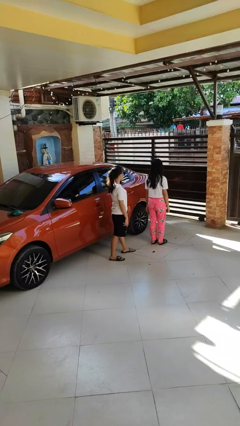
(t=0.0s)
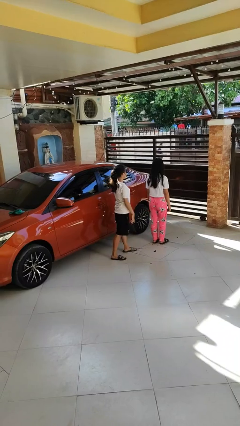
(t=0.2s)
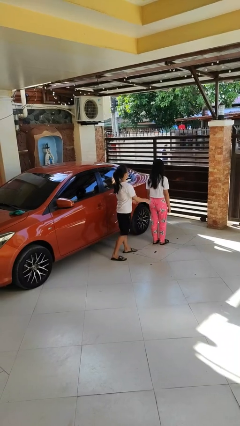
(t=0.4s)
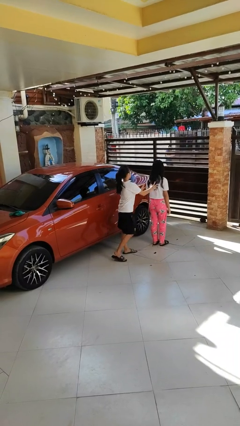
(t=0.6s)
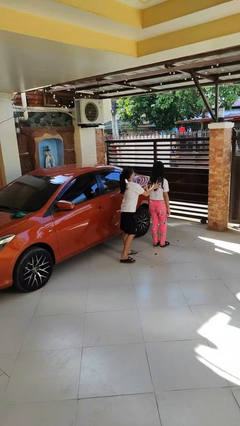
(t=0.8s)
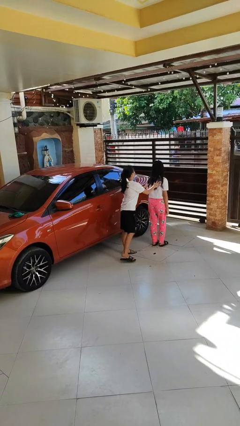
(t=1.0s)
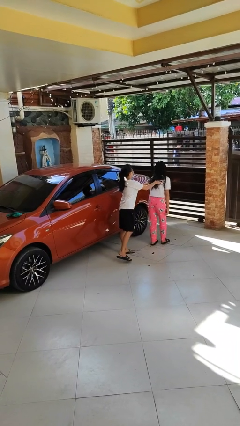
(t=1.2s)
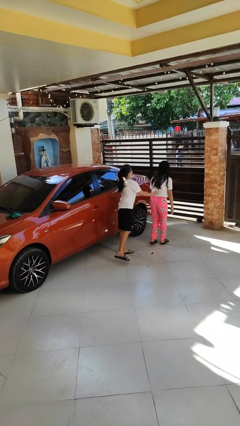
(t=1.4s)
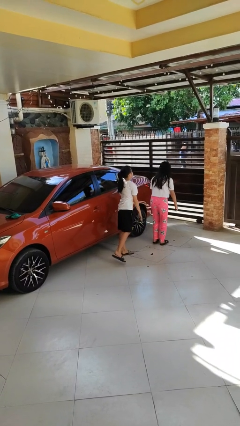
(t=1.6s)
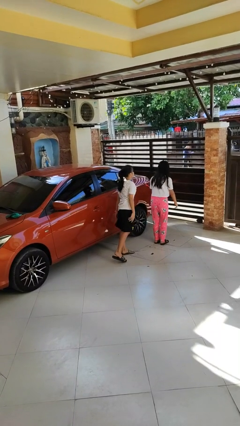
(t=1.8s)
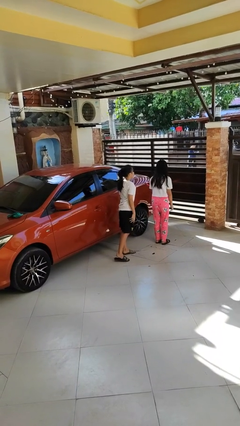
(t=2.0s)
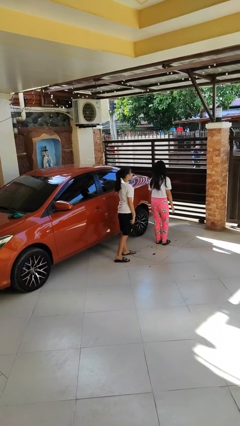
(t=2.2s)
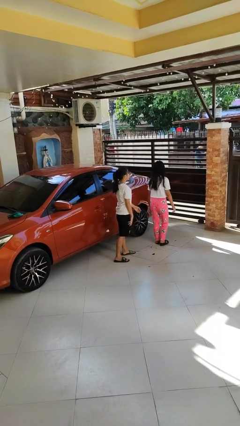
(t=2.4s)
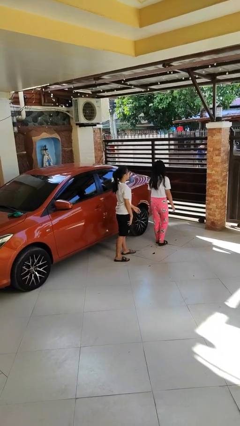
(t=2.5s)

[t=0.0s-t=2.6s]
person shoves person

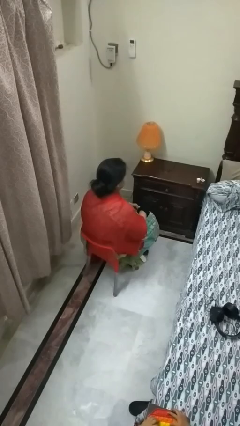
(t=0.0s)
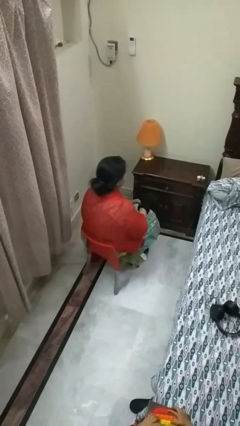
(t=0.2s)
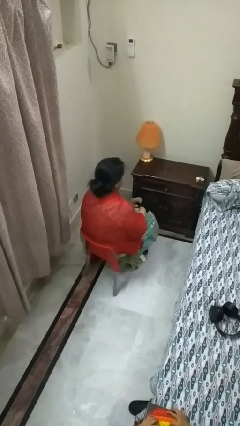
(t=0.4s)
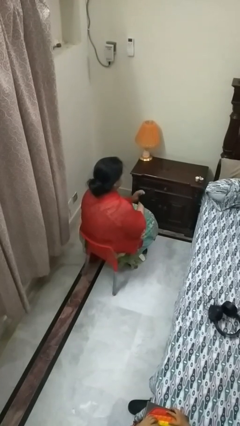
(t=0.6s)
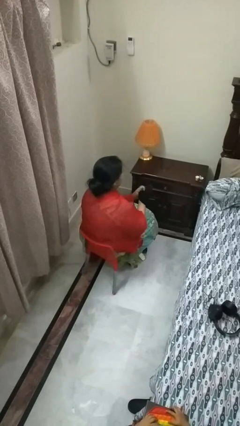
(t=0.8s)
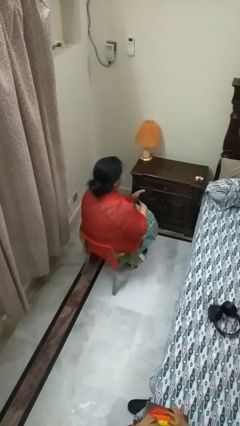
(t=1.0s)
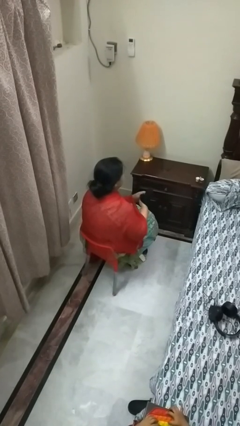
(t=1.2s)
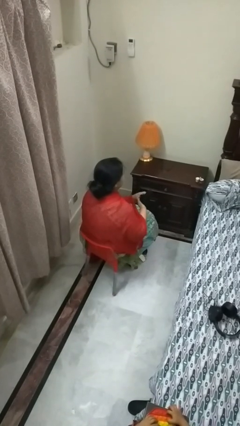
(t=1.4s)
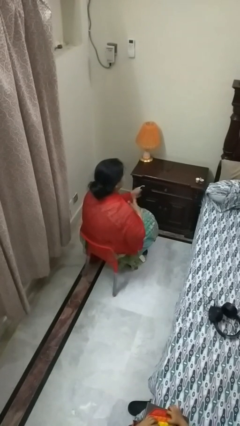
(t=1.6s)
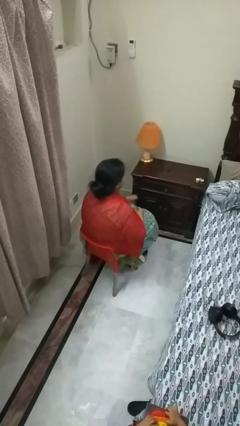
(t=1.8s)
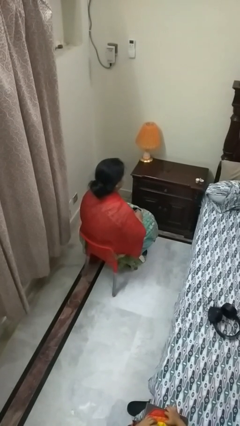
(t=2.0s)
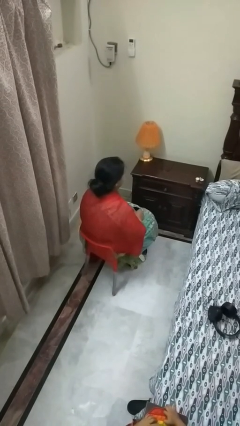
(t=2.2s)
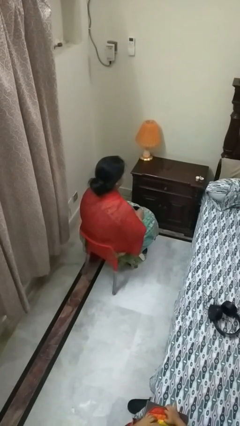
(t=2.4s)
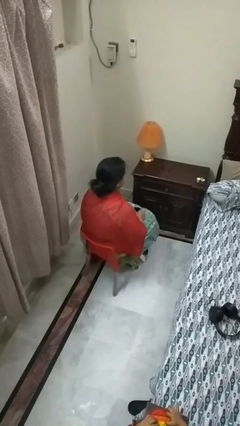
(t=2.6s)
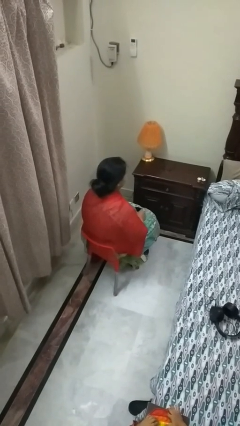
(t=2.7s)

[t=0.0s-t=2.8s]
person takes off gloves

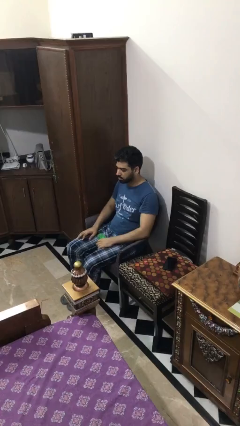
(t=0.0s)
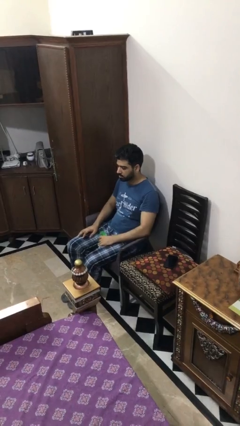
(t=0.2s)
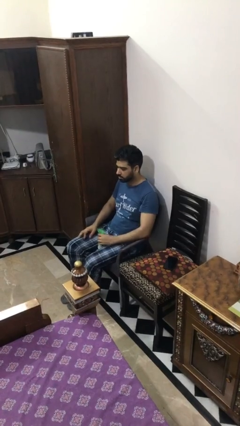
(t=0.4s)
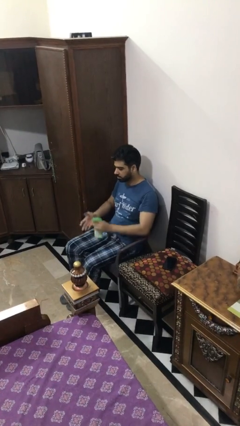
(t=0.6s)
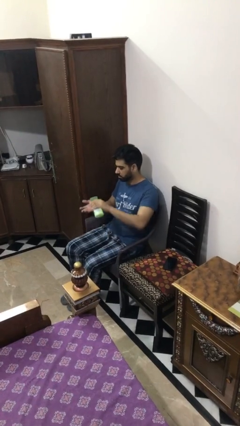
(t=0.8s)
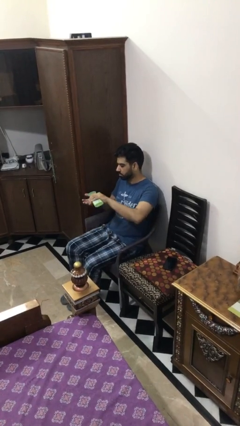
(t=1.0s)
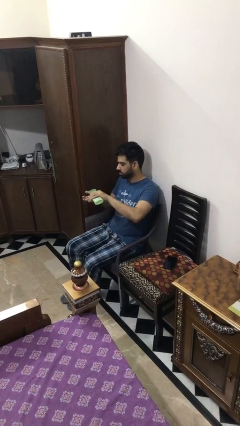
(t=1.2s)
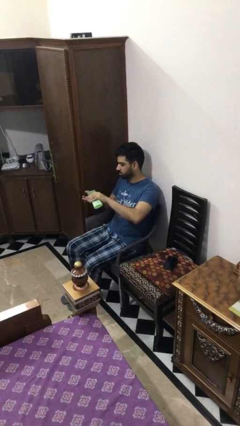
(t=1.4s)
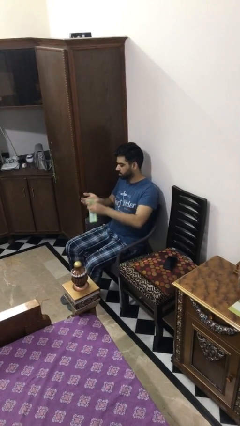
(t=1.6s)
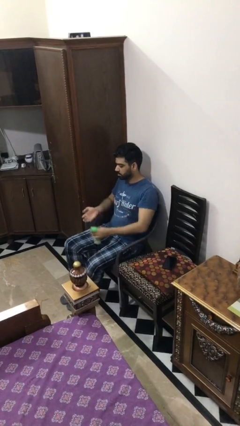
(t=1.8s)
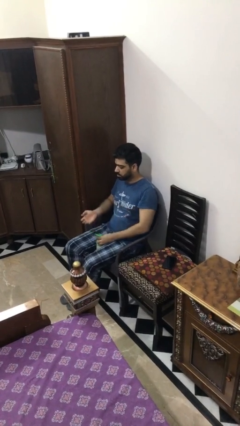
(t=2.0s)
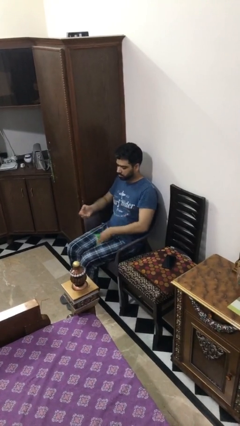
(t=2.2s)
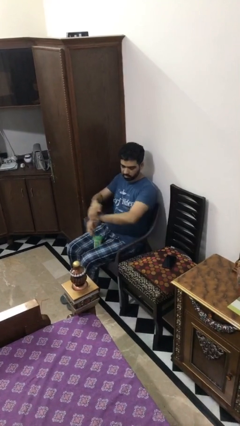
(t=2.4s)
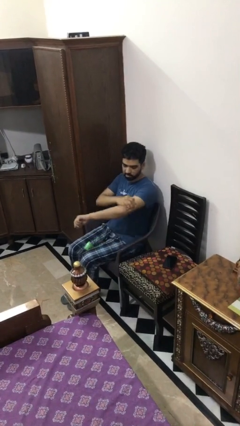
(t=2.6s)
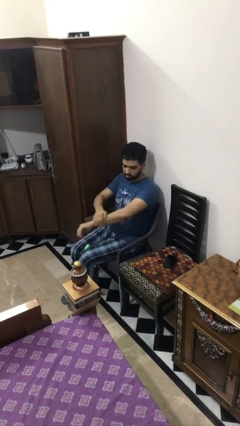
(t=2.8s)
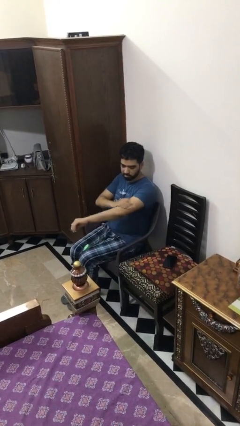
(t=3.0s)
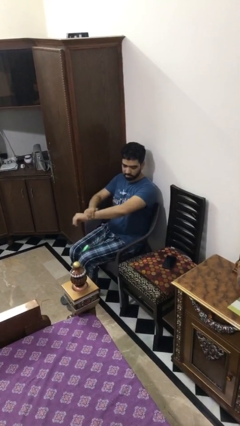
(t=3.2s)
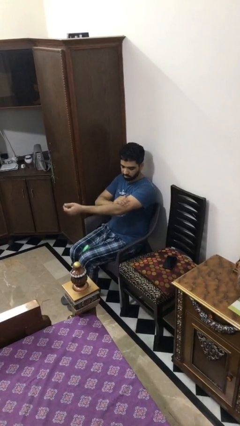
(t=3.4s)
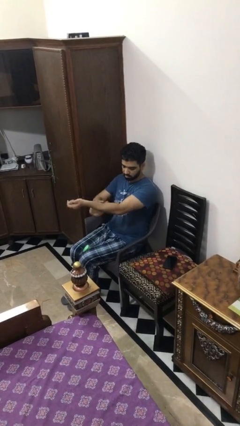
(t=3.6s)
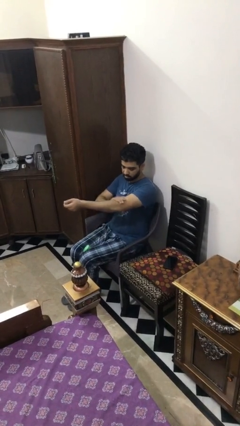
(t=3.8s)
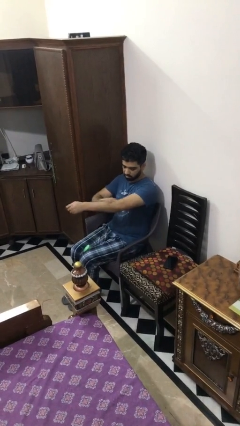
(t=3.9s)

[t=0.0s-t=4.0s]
person applies sunscreen

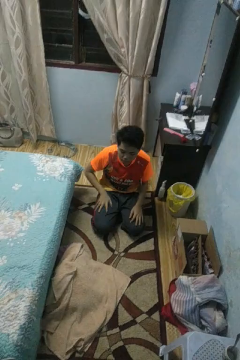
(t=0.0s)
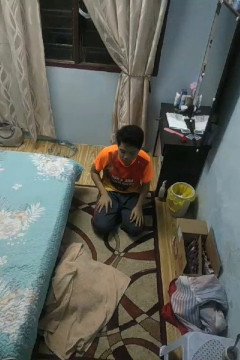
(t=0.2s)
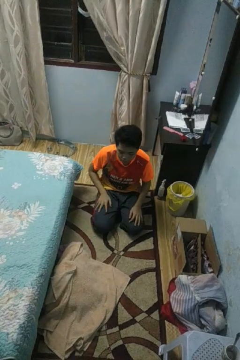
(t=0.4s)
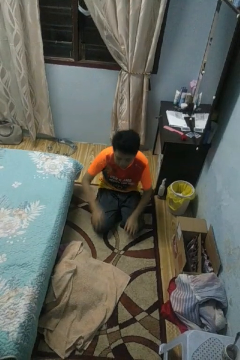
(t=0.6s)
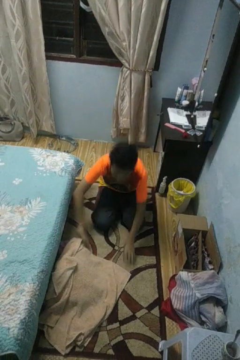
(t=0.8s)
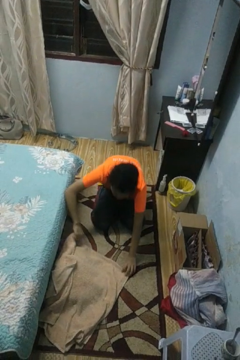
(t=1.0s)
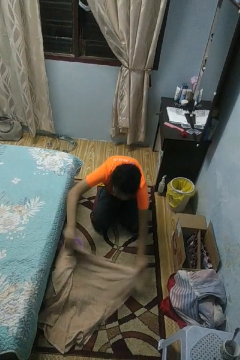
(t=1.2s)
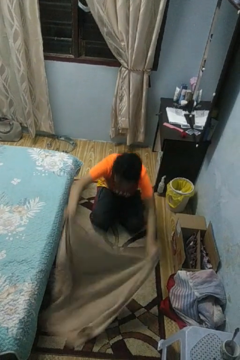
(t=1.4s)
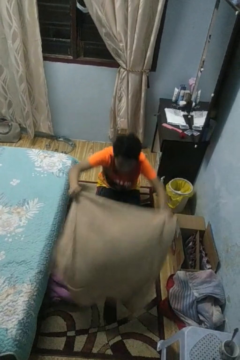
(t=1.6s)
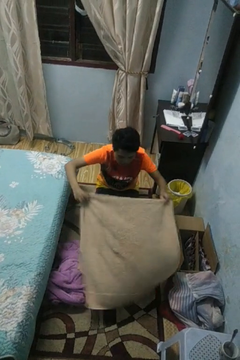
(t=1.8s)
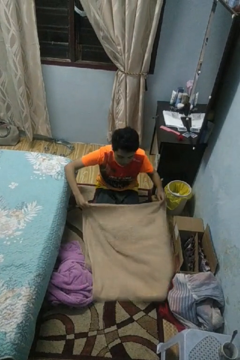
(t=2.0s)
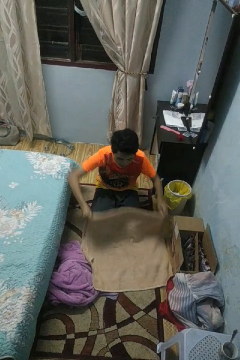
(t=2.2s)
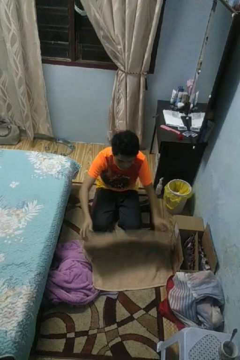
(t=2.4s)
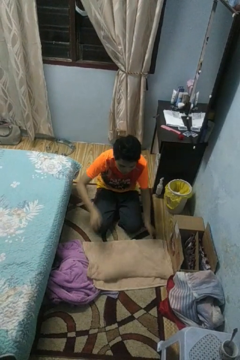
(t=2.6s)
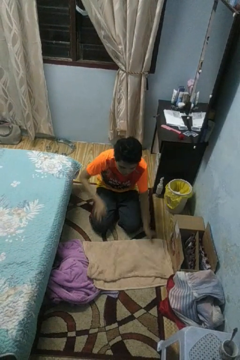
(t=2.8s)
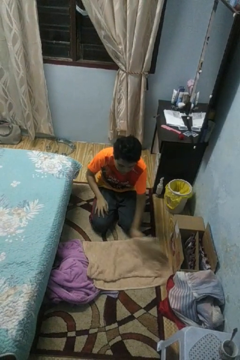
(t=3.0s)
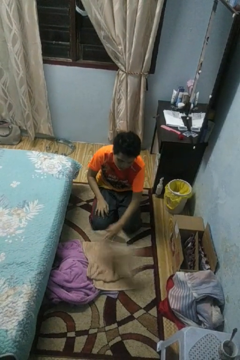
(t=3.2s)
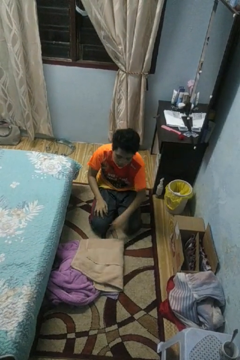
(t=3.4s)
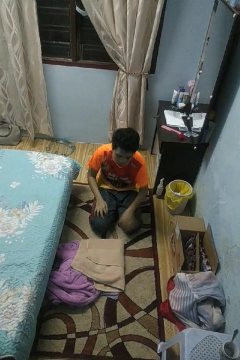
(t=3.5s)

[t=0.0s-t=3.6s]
person folds towel

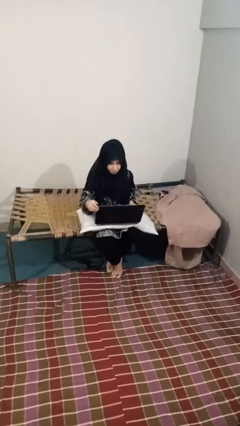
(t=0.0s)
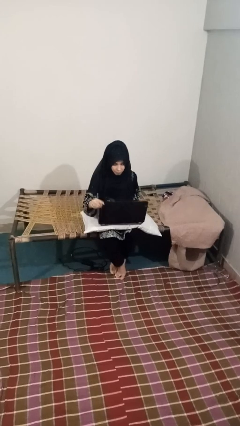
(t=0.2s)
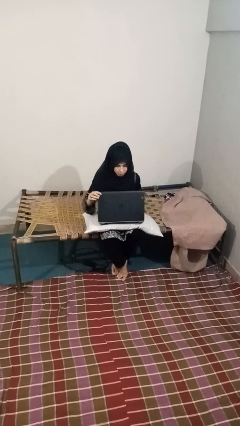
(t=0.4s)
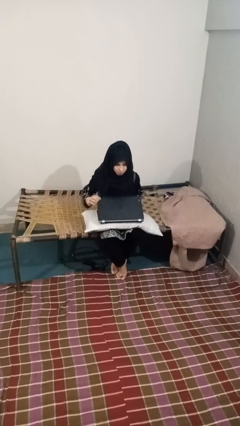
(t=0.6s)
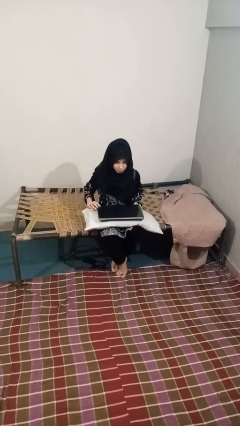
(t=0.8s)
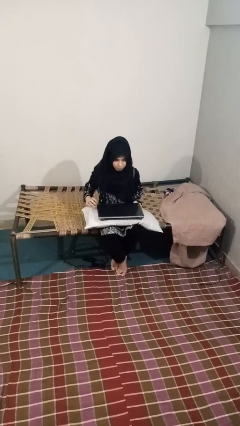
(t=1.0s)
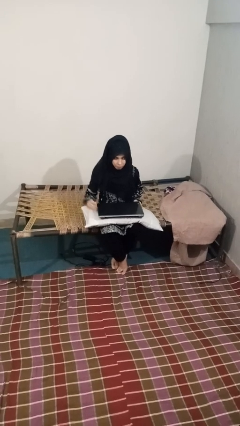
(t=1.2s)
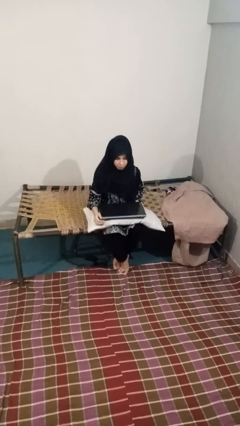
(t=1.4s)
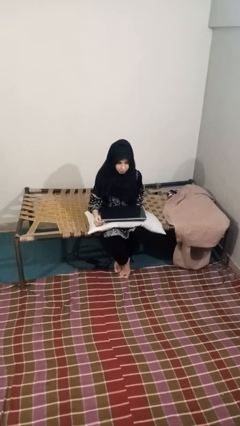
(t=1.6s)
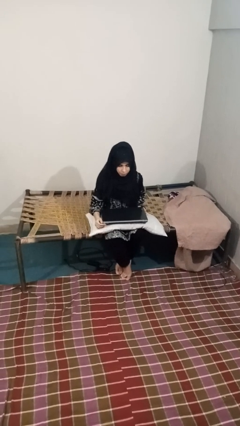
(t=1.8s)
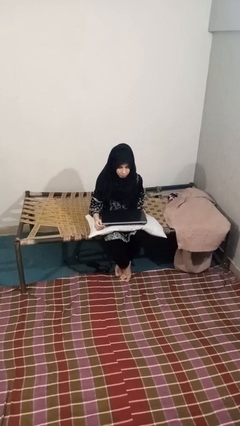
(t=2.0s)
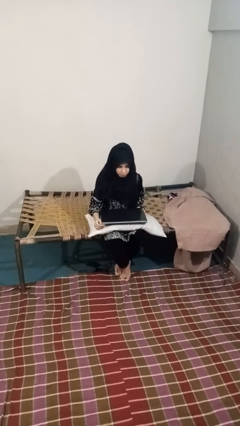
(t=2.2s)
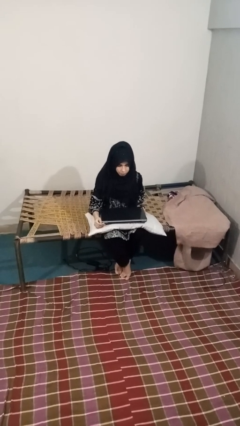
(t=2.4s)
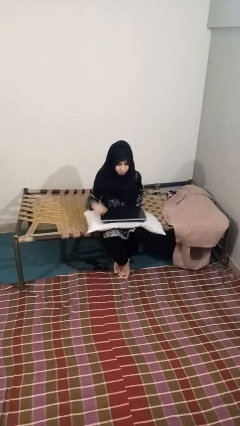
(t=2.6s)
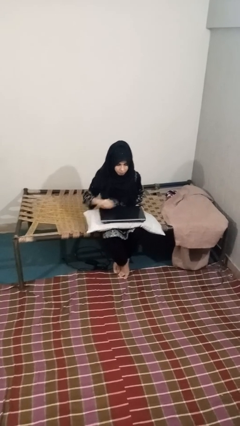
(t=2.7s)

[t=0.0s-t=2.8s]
person closes laptop

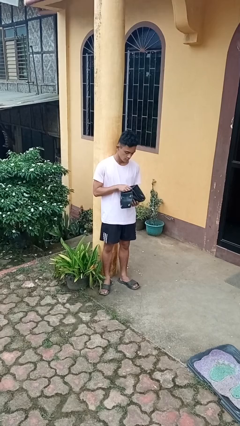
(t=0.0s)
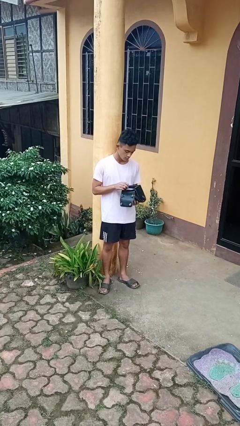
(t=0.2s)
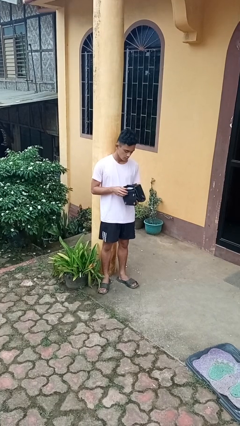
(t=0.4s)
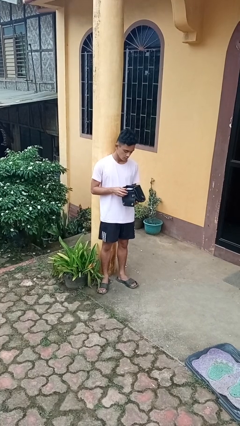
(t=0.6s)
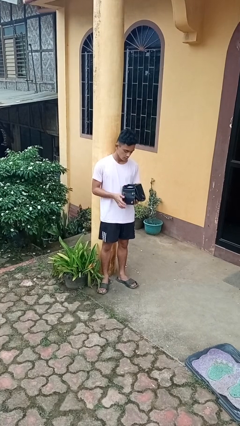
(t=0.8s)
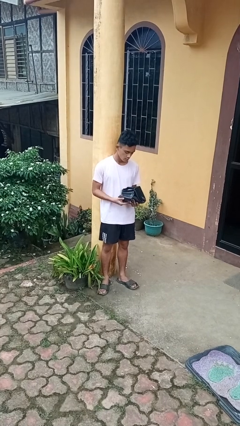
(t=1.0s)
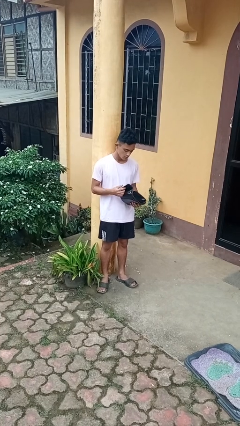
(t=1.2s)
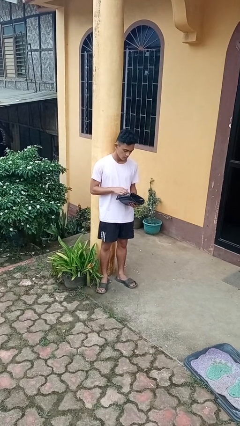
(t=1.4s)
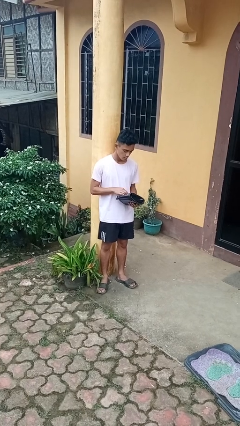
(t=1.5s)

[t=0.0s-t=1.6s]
person puts object into purse
